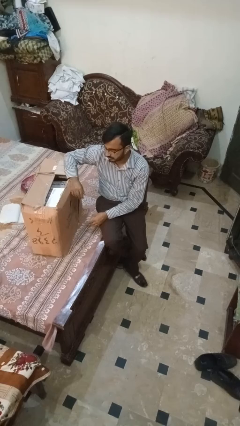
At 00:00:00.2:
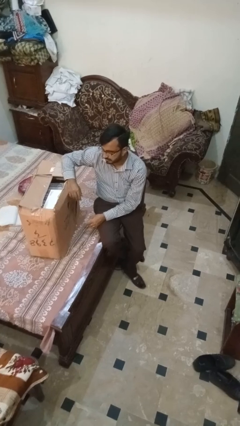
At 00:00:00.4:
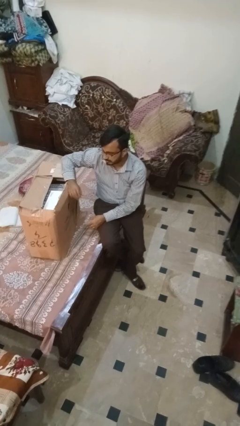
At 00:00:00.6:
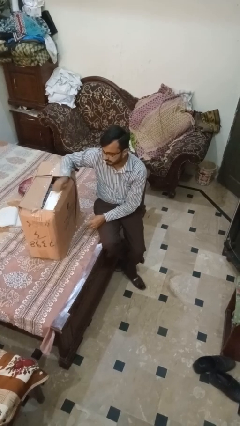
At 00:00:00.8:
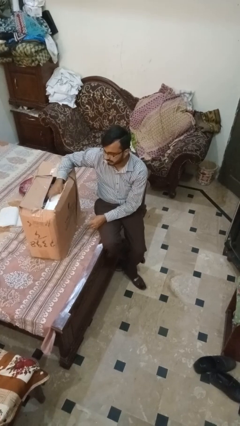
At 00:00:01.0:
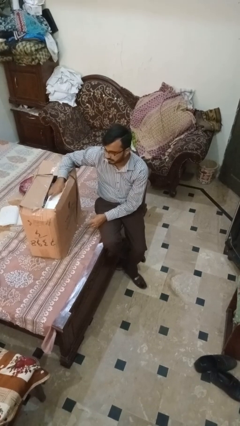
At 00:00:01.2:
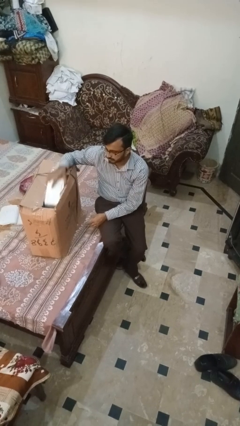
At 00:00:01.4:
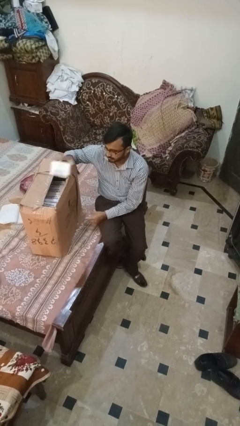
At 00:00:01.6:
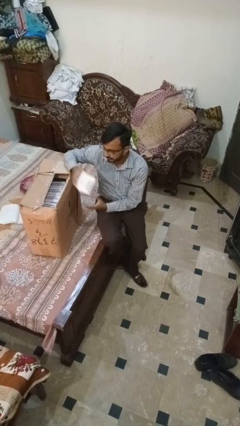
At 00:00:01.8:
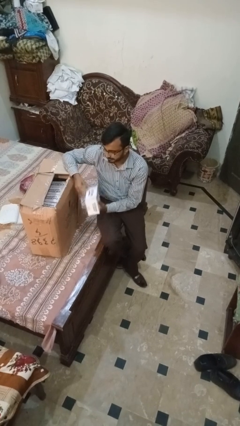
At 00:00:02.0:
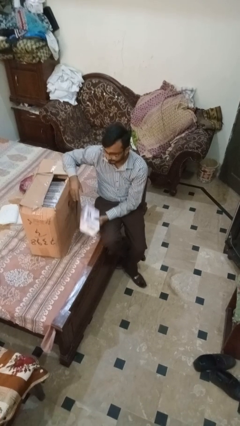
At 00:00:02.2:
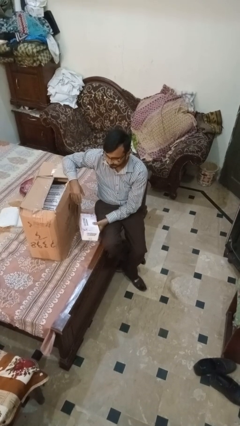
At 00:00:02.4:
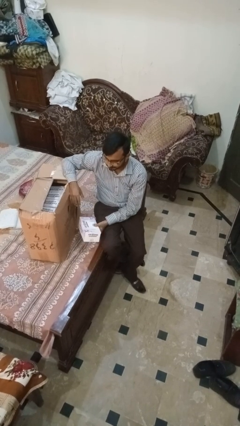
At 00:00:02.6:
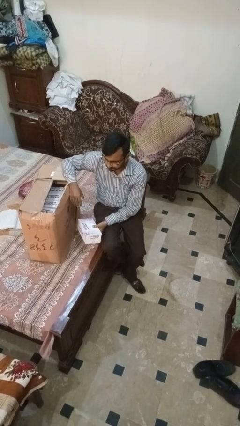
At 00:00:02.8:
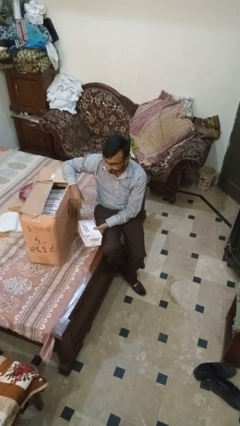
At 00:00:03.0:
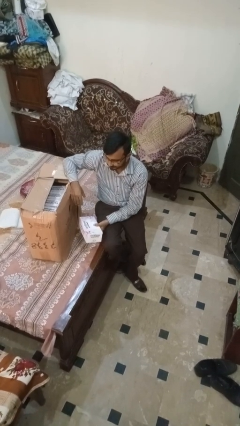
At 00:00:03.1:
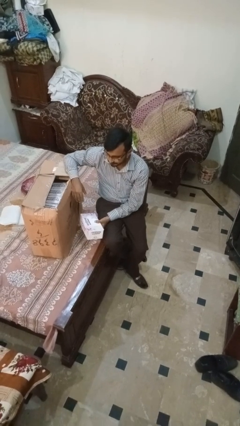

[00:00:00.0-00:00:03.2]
person takes object from box

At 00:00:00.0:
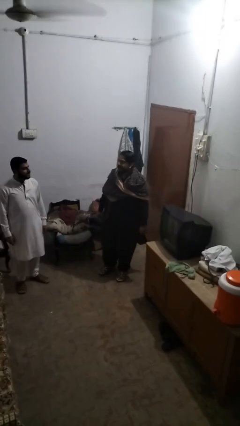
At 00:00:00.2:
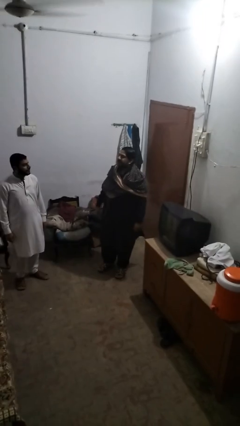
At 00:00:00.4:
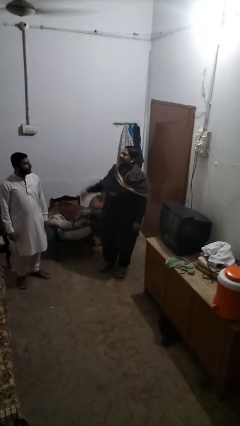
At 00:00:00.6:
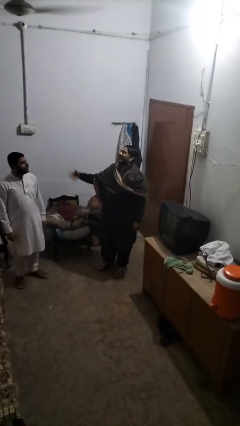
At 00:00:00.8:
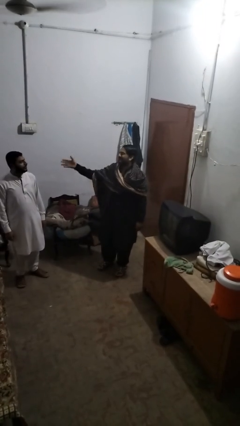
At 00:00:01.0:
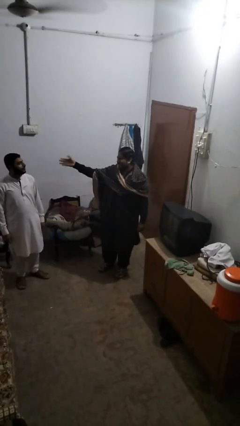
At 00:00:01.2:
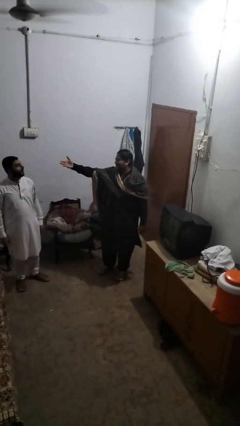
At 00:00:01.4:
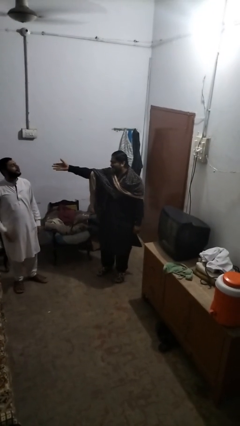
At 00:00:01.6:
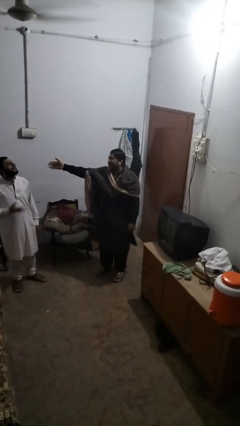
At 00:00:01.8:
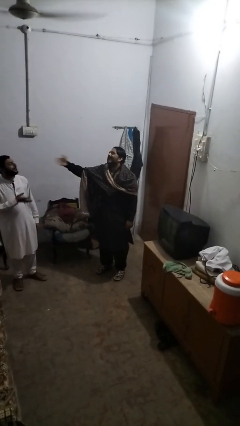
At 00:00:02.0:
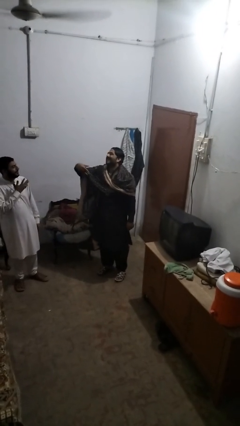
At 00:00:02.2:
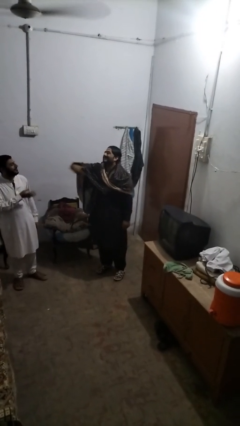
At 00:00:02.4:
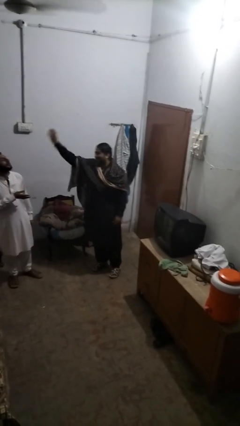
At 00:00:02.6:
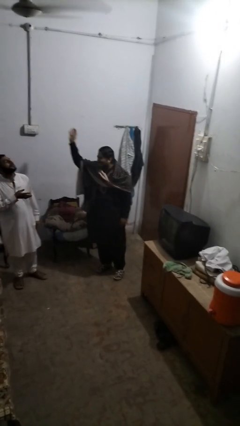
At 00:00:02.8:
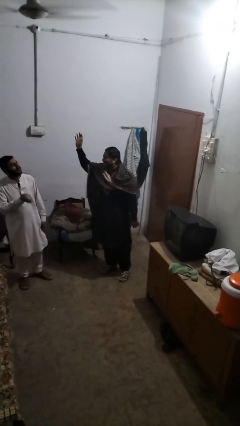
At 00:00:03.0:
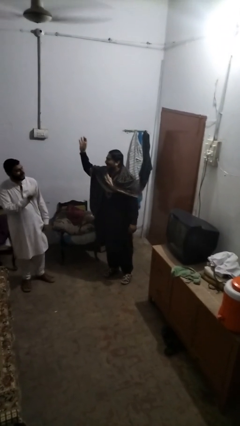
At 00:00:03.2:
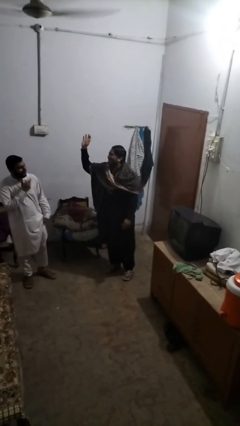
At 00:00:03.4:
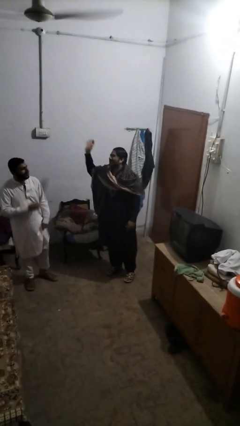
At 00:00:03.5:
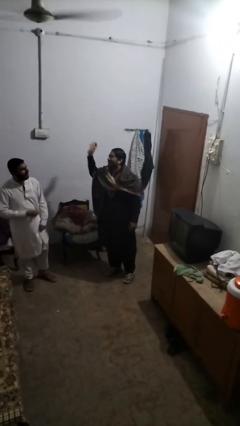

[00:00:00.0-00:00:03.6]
person shoves person

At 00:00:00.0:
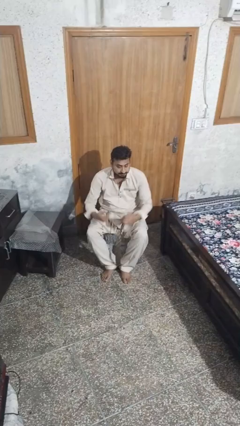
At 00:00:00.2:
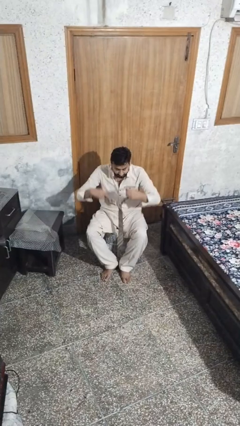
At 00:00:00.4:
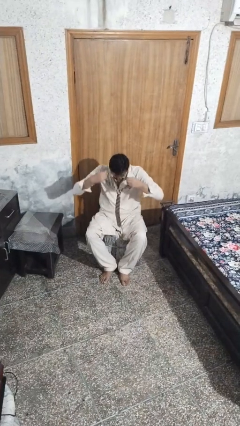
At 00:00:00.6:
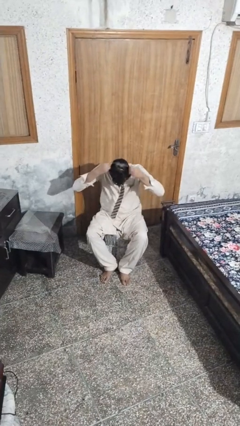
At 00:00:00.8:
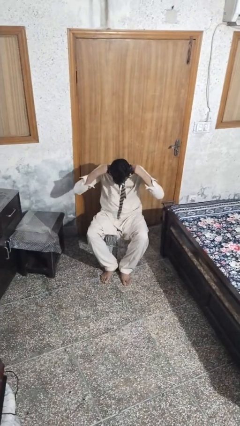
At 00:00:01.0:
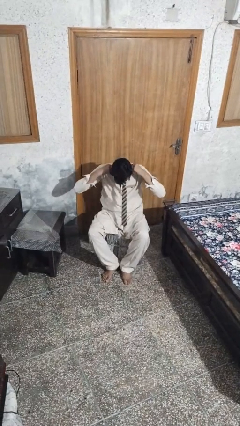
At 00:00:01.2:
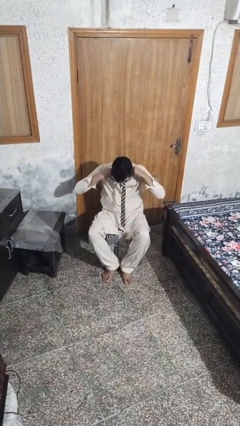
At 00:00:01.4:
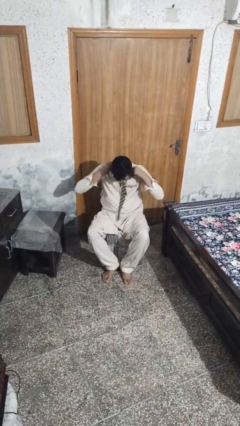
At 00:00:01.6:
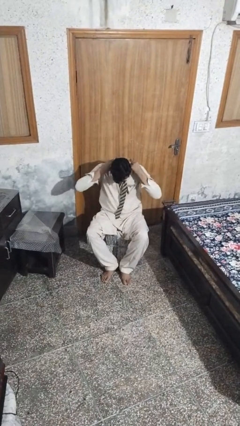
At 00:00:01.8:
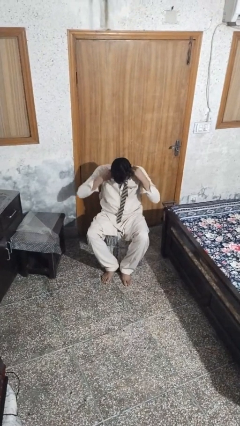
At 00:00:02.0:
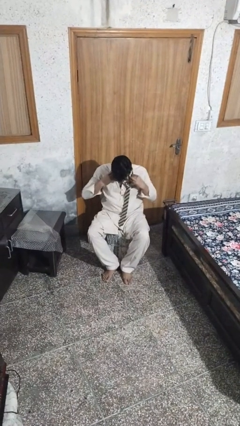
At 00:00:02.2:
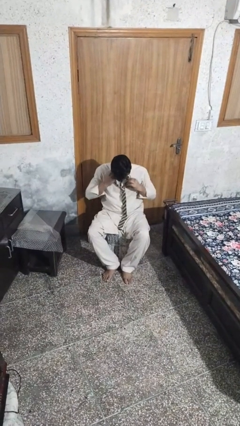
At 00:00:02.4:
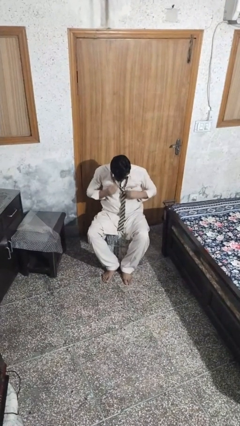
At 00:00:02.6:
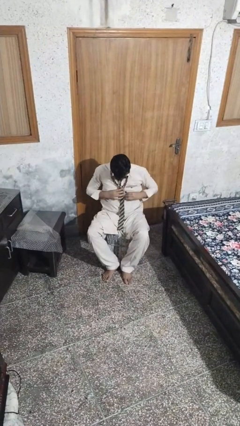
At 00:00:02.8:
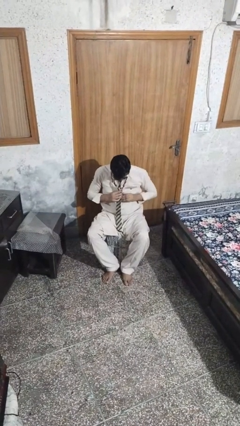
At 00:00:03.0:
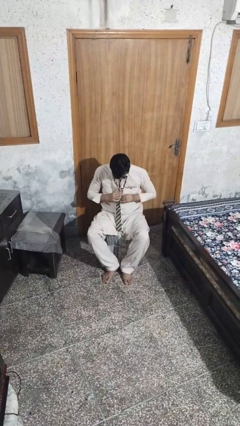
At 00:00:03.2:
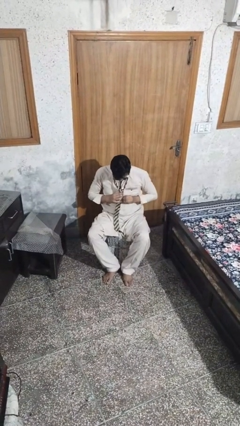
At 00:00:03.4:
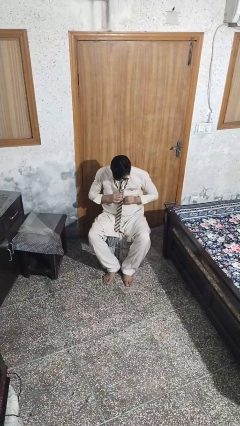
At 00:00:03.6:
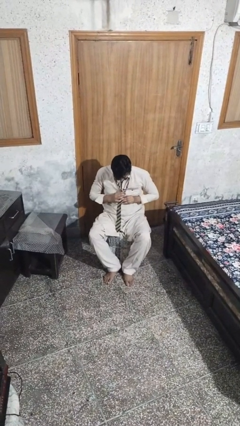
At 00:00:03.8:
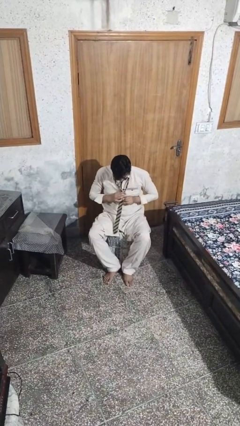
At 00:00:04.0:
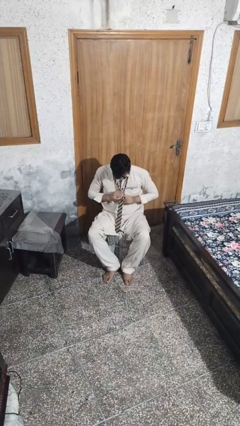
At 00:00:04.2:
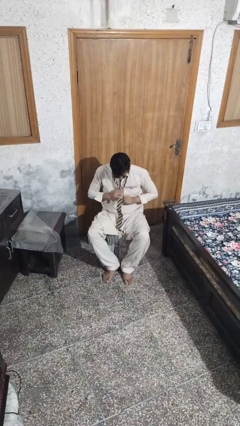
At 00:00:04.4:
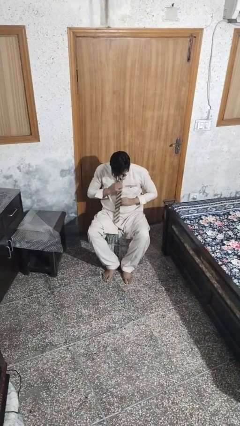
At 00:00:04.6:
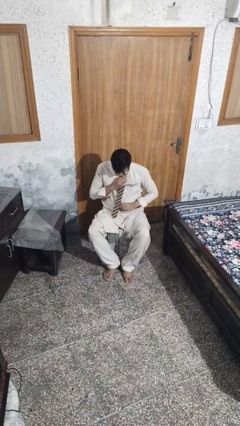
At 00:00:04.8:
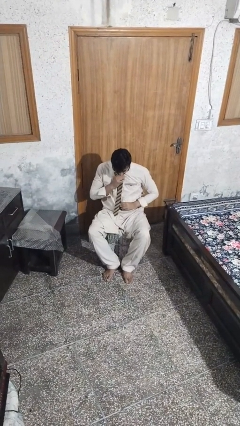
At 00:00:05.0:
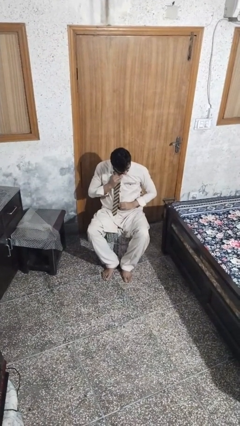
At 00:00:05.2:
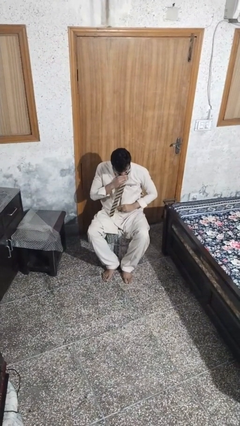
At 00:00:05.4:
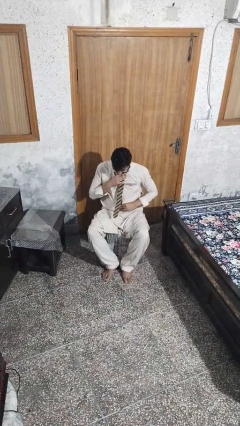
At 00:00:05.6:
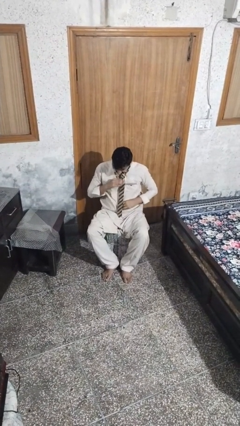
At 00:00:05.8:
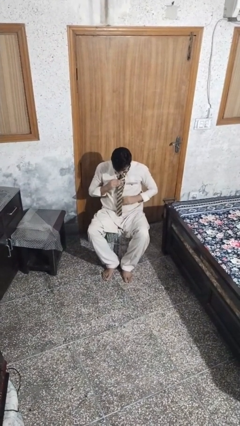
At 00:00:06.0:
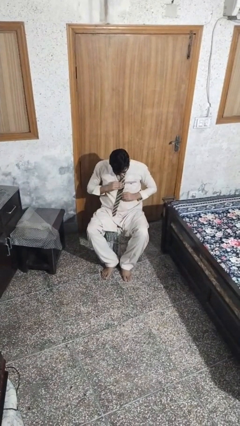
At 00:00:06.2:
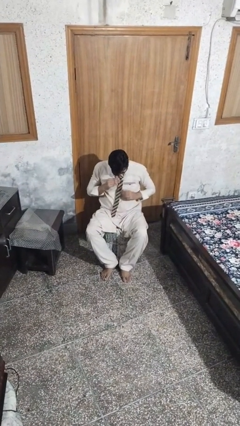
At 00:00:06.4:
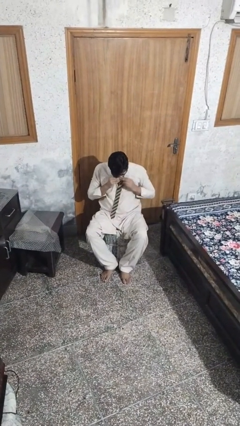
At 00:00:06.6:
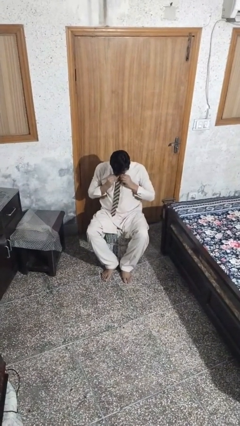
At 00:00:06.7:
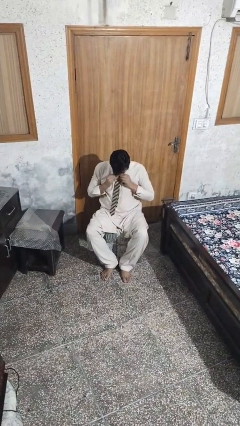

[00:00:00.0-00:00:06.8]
person puts on necktie

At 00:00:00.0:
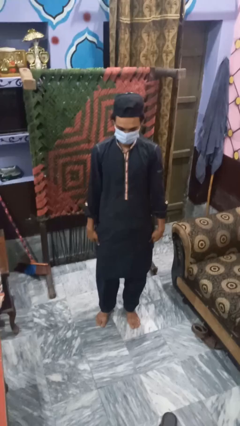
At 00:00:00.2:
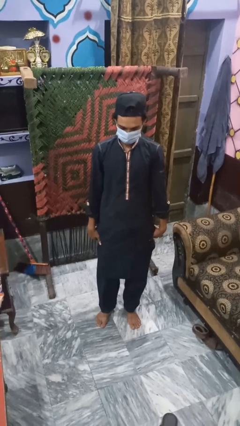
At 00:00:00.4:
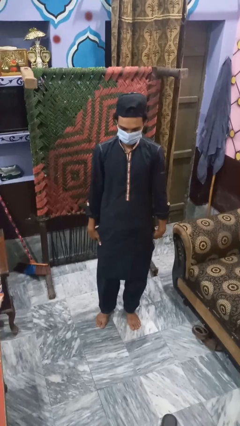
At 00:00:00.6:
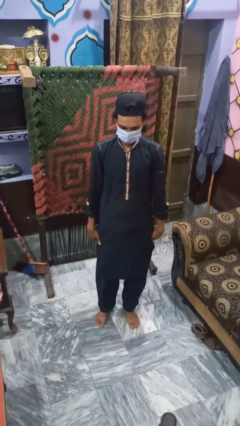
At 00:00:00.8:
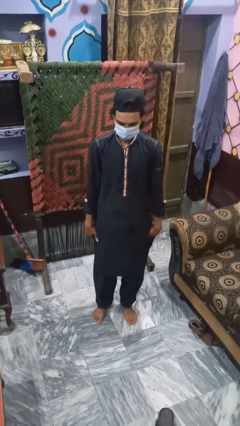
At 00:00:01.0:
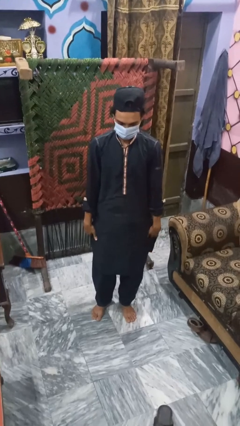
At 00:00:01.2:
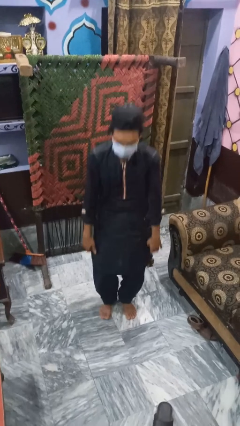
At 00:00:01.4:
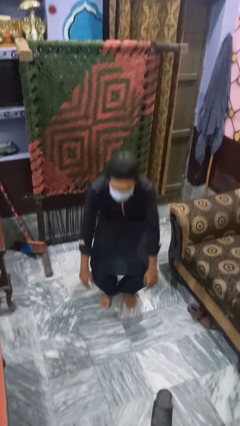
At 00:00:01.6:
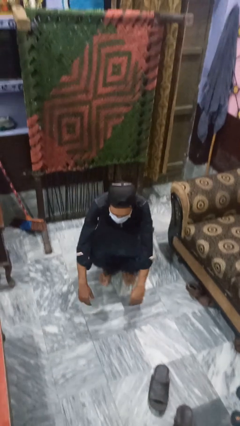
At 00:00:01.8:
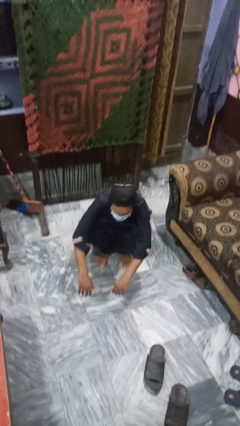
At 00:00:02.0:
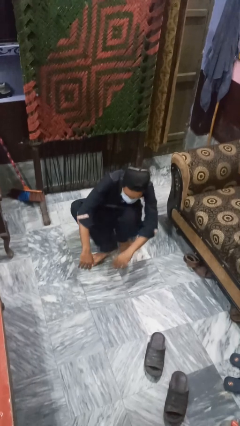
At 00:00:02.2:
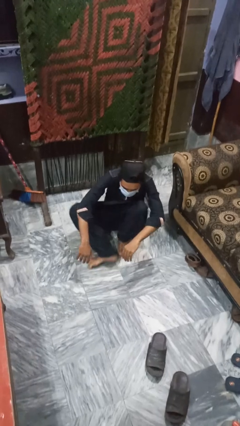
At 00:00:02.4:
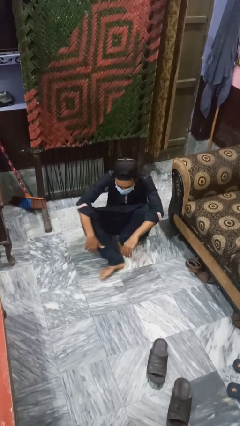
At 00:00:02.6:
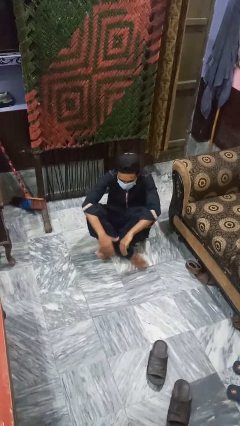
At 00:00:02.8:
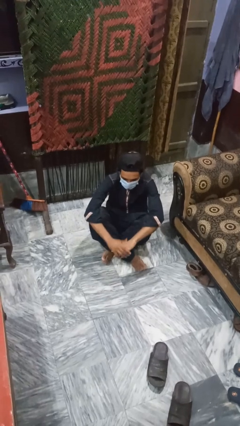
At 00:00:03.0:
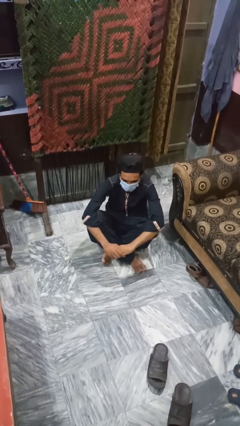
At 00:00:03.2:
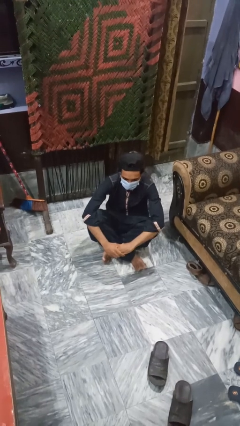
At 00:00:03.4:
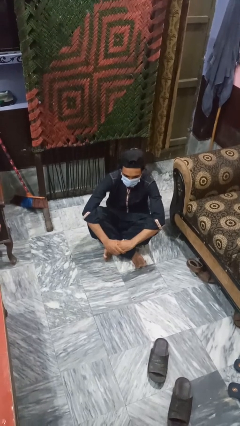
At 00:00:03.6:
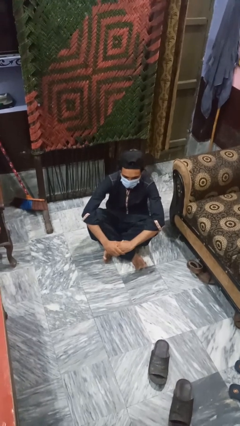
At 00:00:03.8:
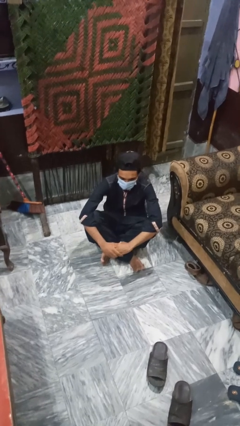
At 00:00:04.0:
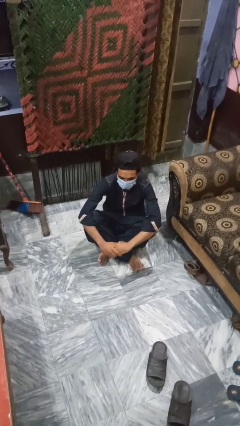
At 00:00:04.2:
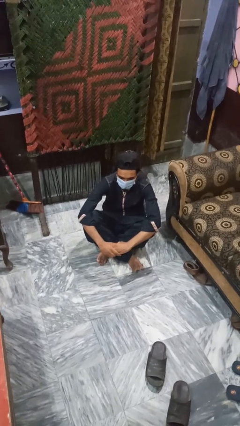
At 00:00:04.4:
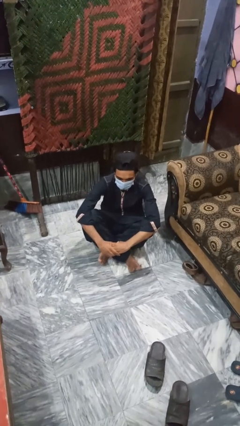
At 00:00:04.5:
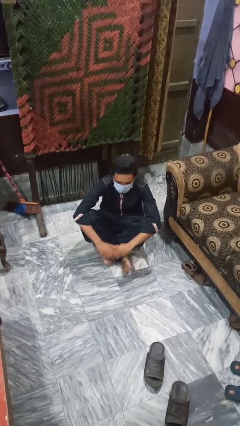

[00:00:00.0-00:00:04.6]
person sits crisscross
